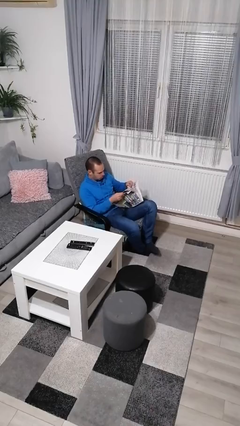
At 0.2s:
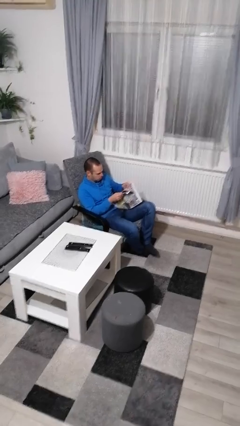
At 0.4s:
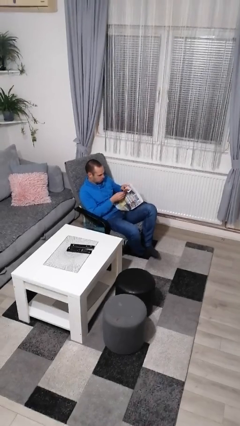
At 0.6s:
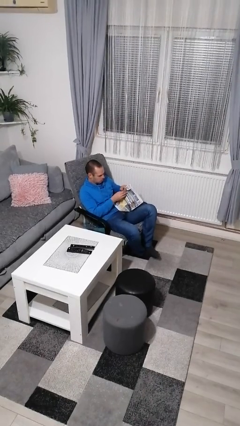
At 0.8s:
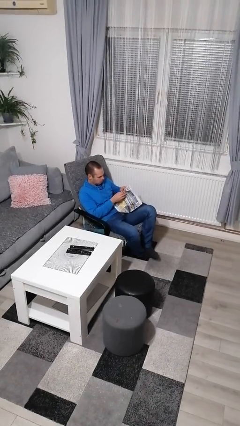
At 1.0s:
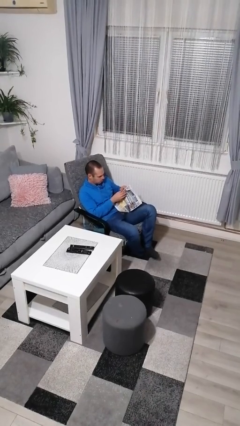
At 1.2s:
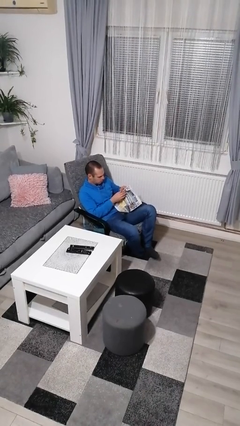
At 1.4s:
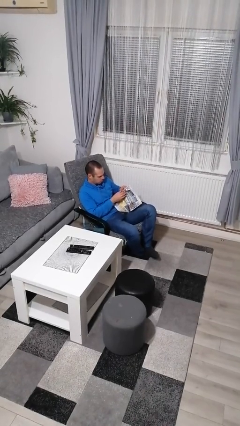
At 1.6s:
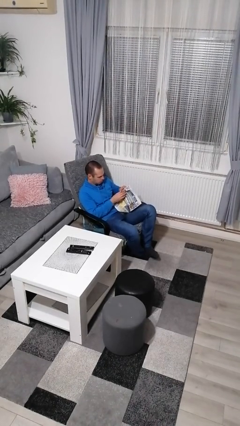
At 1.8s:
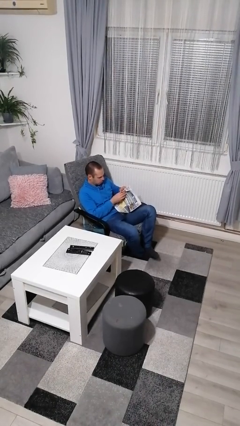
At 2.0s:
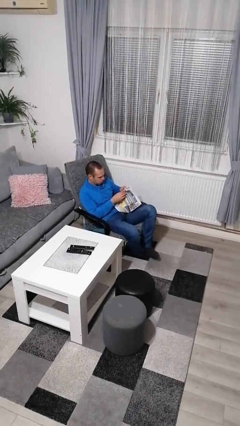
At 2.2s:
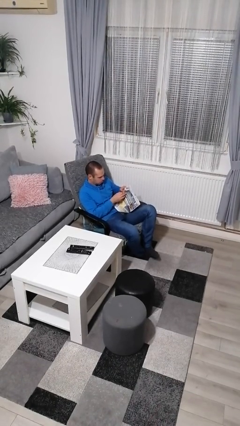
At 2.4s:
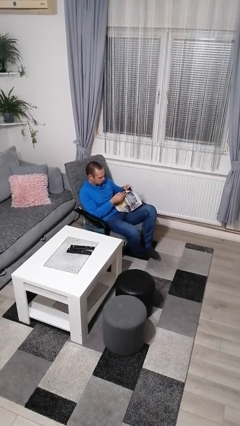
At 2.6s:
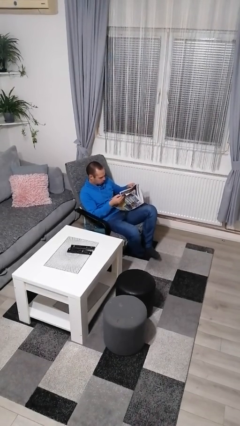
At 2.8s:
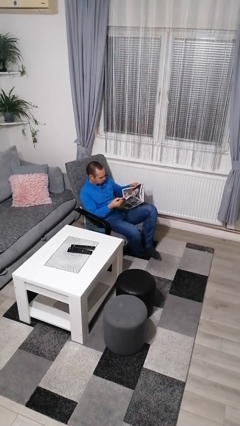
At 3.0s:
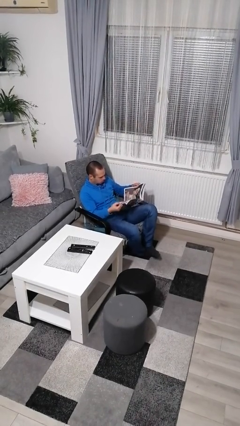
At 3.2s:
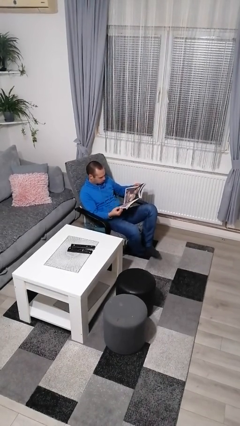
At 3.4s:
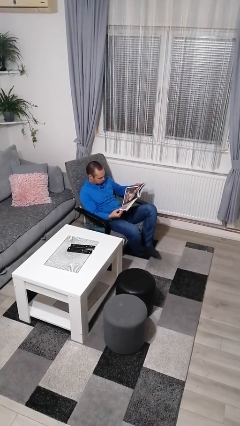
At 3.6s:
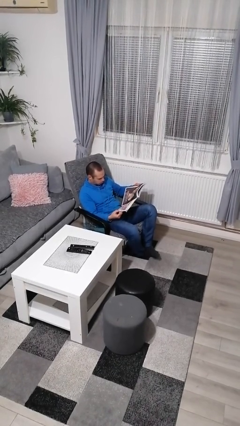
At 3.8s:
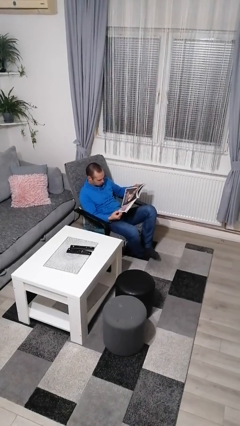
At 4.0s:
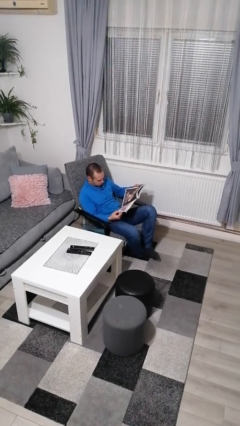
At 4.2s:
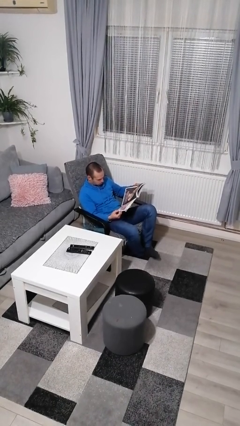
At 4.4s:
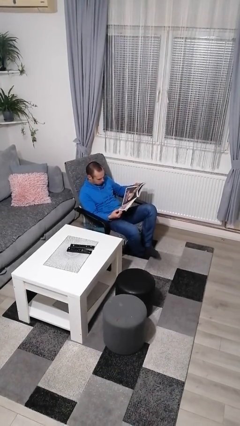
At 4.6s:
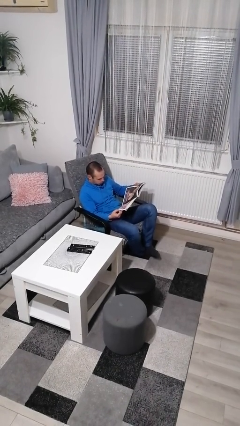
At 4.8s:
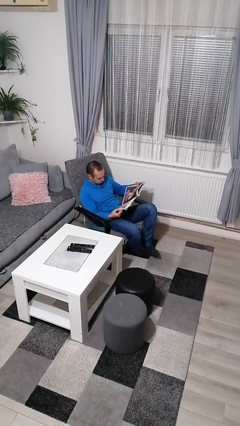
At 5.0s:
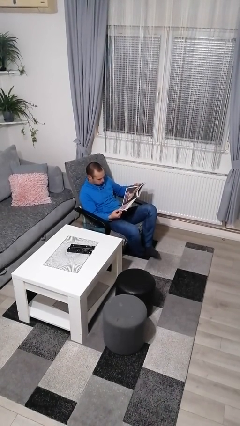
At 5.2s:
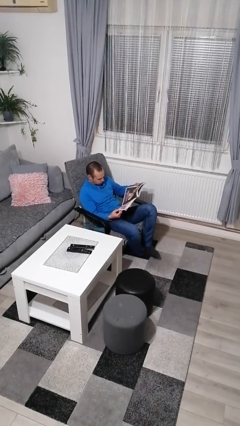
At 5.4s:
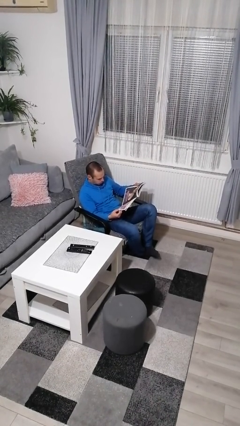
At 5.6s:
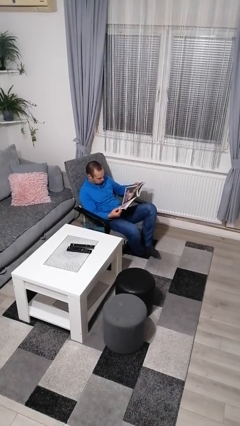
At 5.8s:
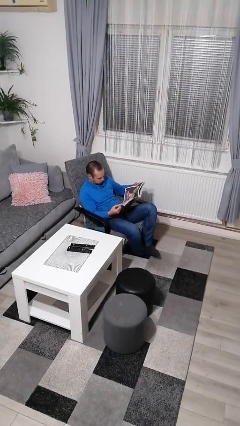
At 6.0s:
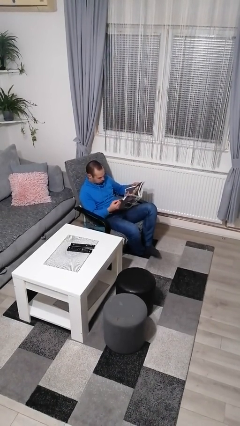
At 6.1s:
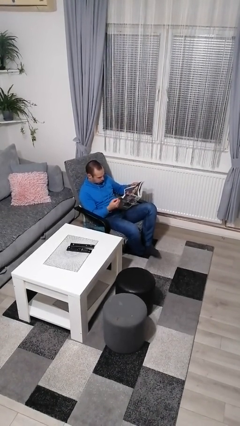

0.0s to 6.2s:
person reads newspaper

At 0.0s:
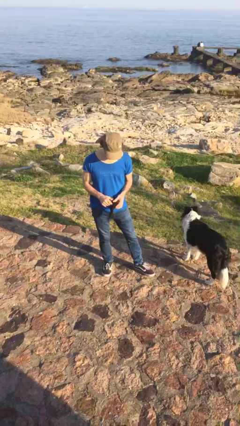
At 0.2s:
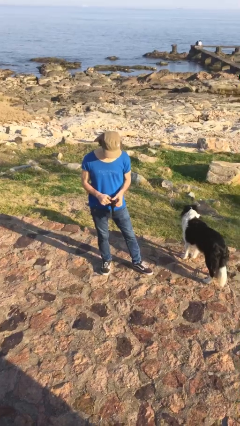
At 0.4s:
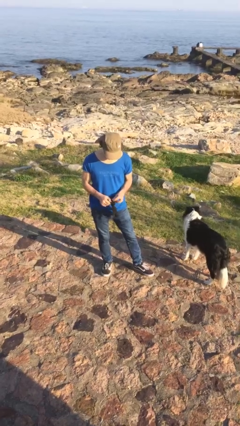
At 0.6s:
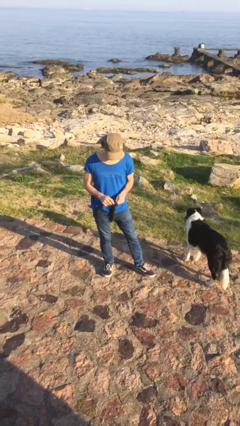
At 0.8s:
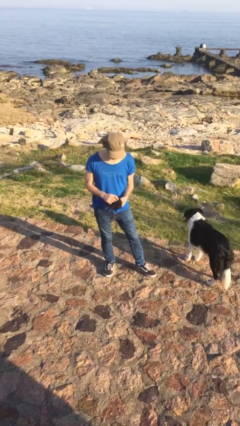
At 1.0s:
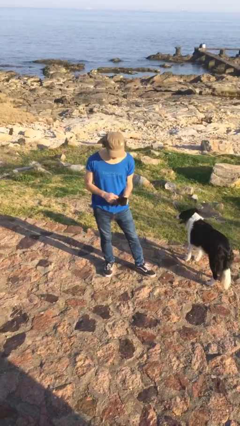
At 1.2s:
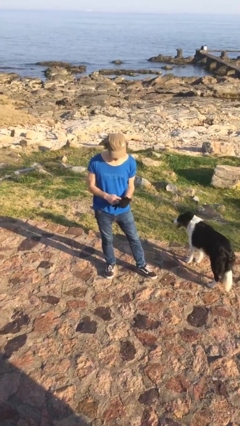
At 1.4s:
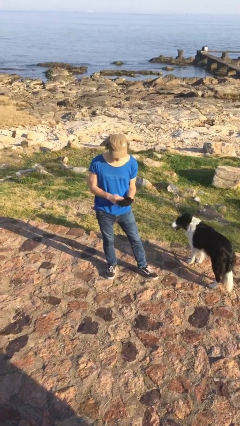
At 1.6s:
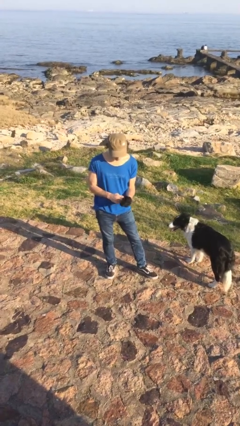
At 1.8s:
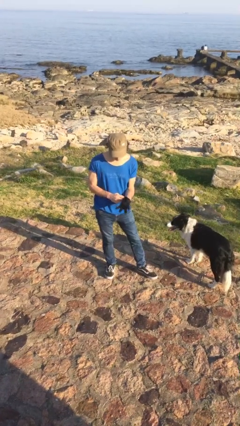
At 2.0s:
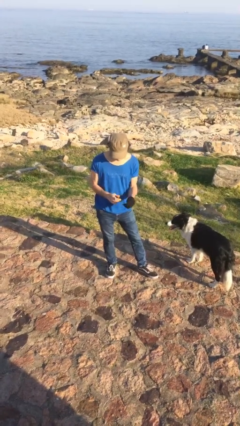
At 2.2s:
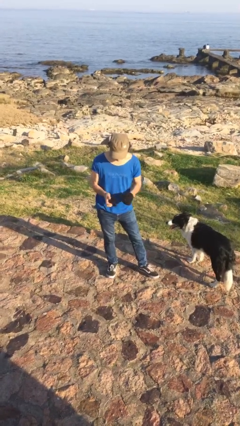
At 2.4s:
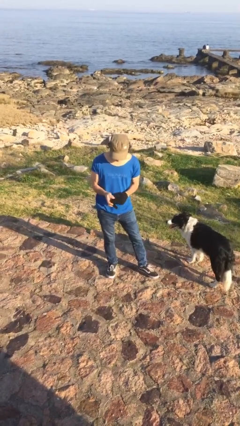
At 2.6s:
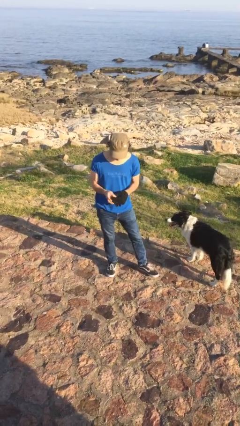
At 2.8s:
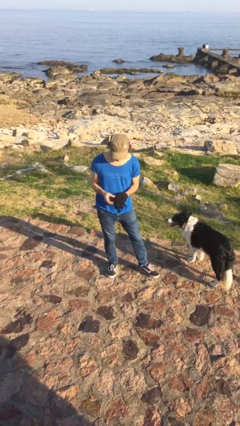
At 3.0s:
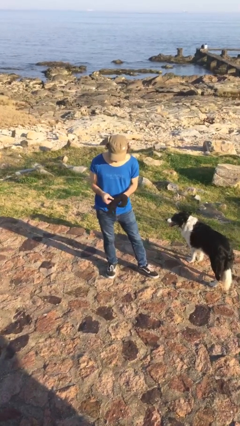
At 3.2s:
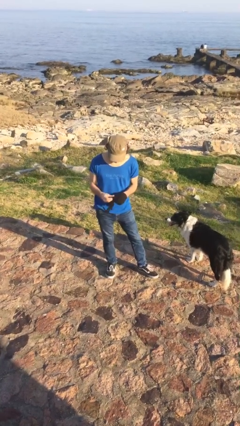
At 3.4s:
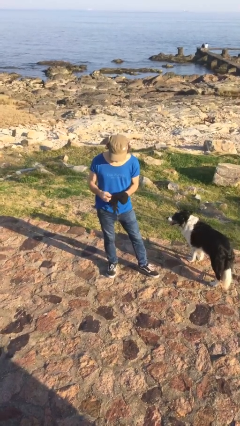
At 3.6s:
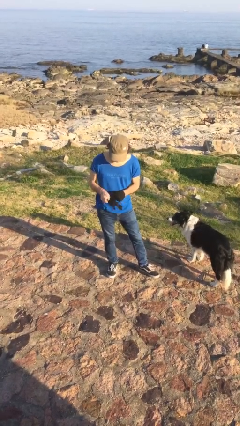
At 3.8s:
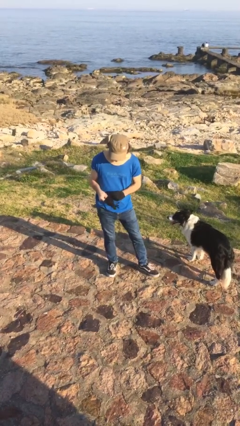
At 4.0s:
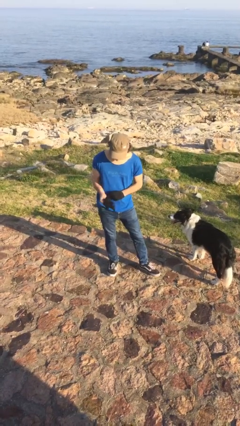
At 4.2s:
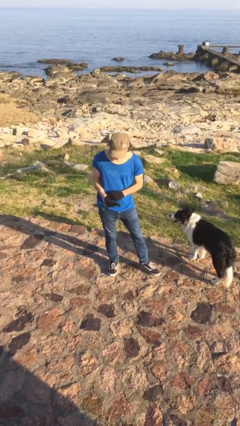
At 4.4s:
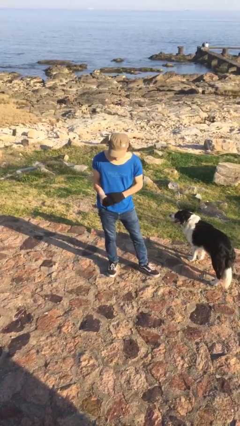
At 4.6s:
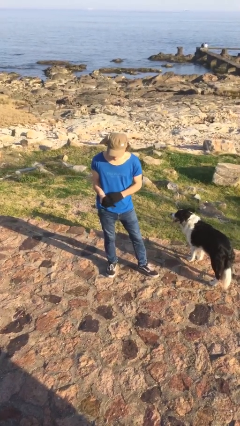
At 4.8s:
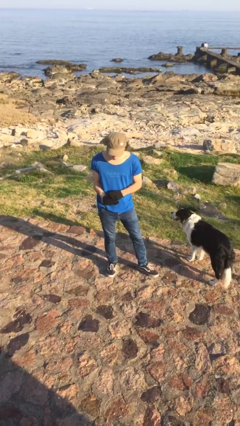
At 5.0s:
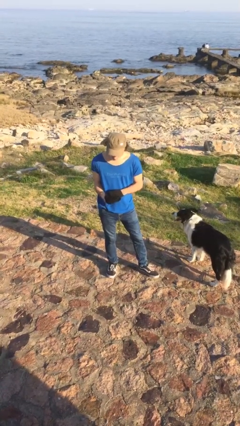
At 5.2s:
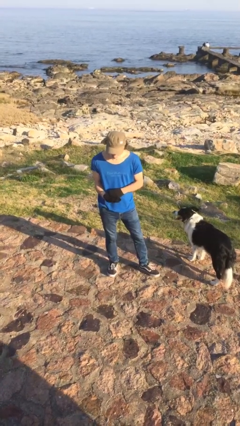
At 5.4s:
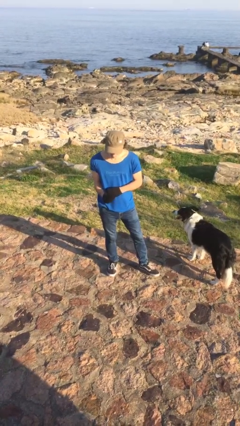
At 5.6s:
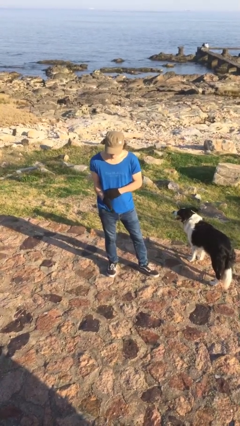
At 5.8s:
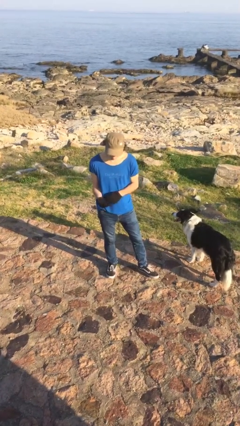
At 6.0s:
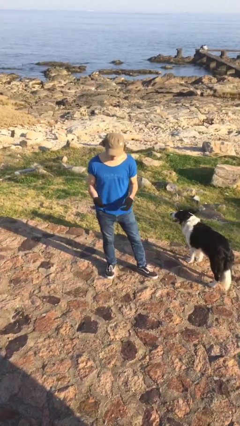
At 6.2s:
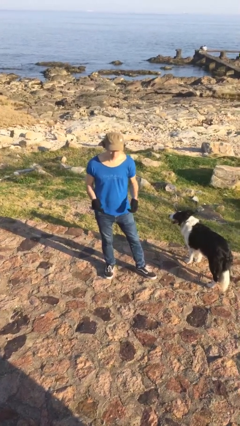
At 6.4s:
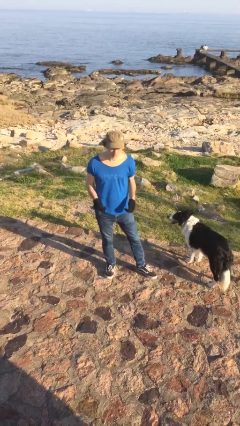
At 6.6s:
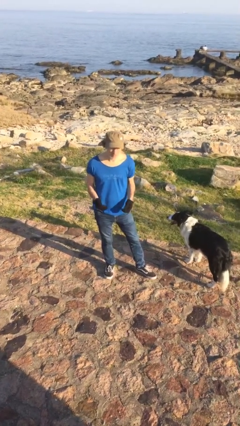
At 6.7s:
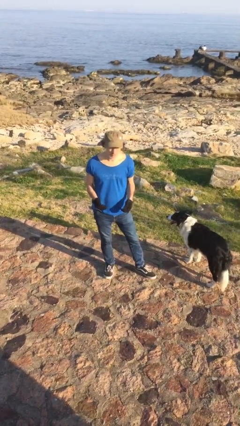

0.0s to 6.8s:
person puts on gloves

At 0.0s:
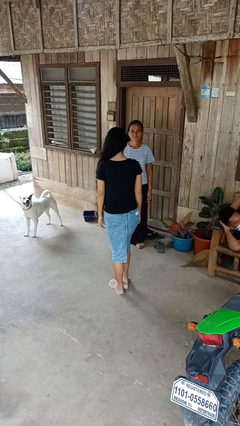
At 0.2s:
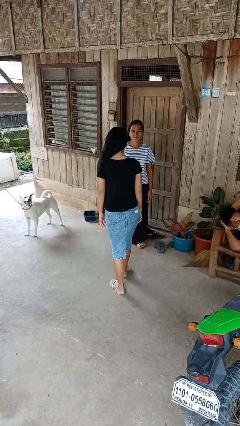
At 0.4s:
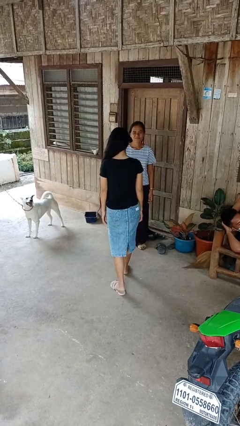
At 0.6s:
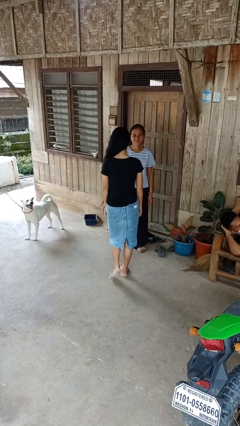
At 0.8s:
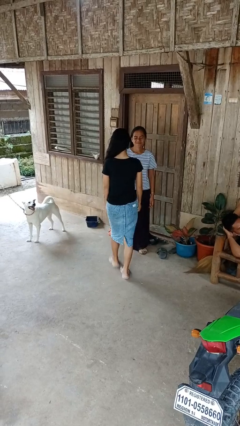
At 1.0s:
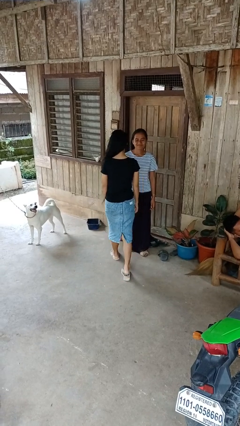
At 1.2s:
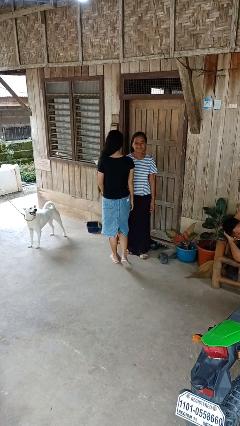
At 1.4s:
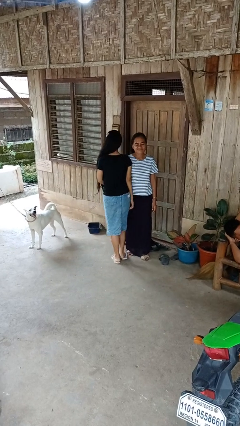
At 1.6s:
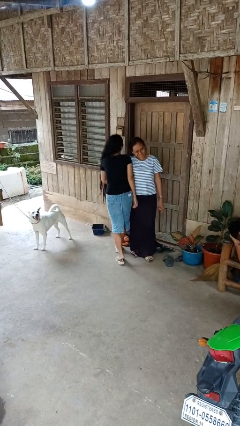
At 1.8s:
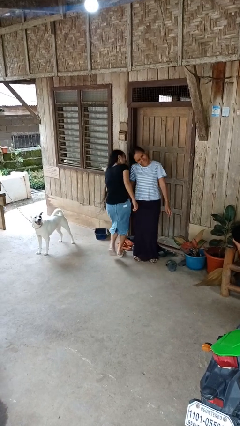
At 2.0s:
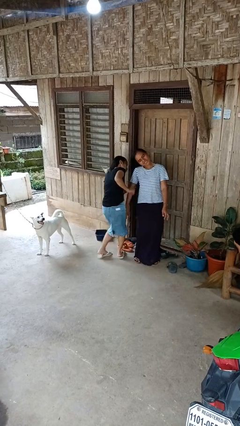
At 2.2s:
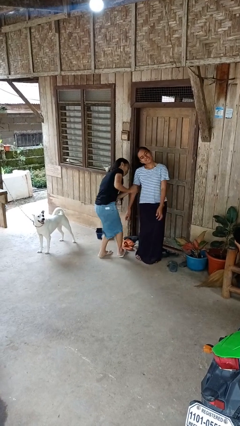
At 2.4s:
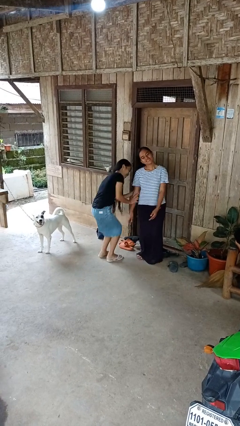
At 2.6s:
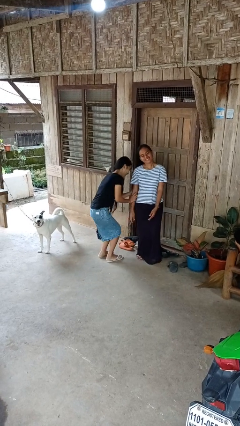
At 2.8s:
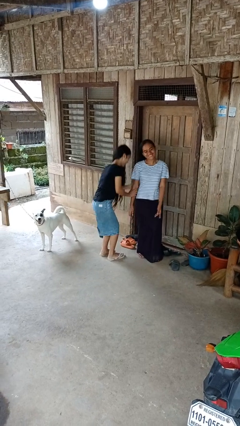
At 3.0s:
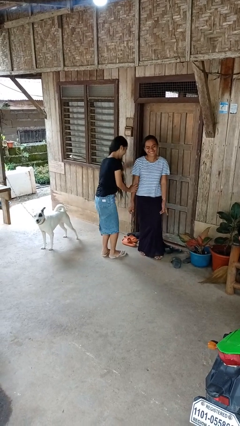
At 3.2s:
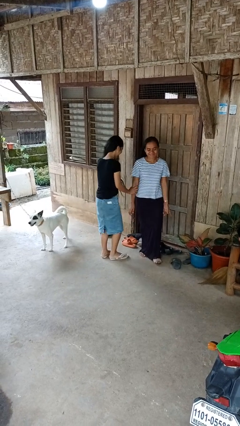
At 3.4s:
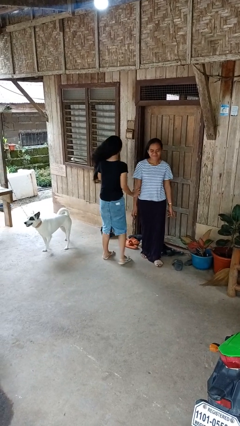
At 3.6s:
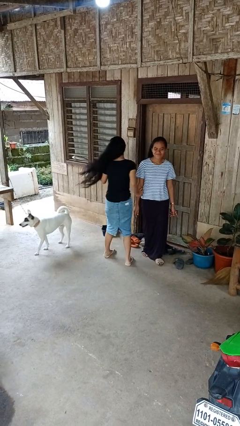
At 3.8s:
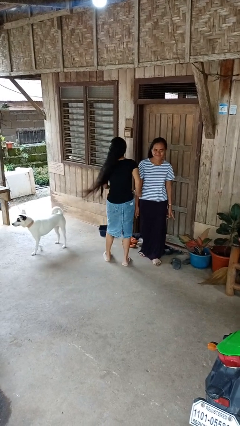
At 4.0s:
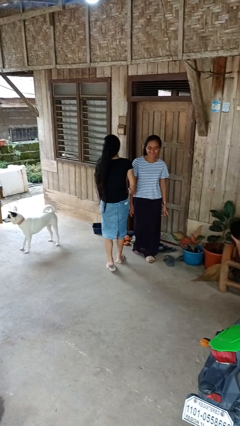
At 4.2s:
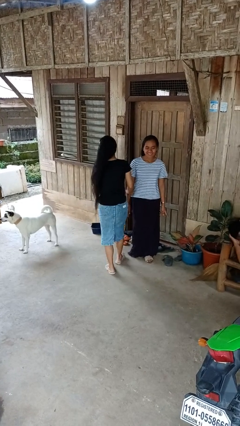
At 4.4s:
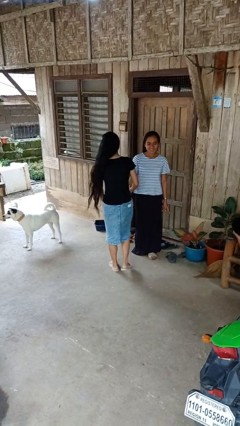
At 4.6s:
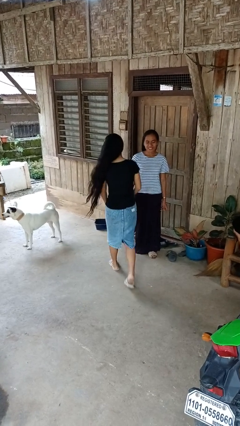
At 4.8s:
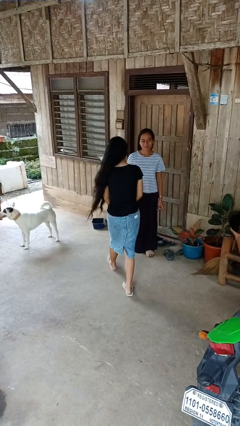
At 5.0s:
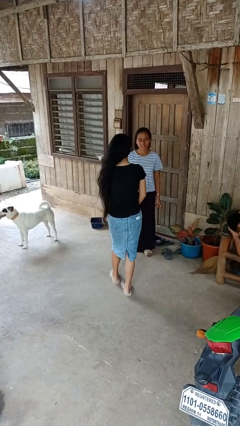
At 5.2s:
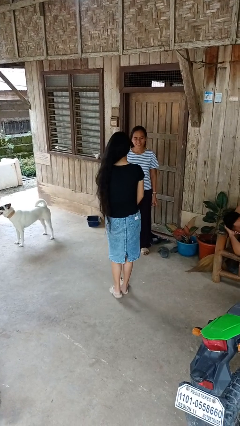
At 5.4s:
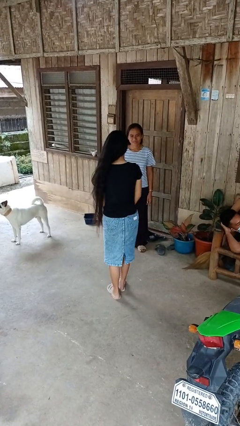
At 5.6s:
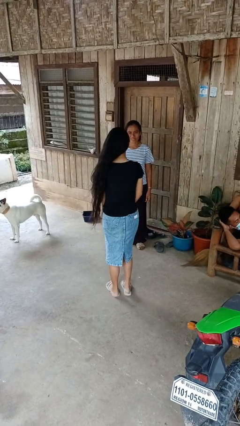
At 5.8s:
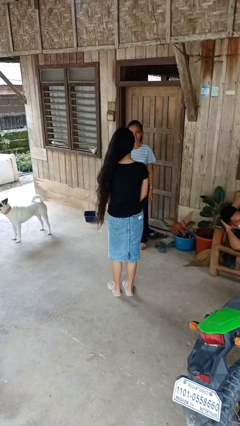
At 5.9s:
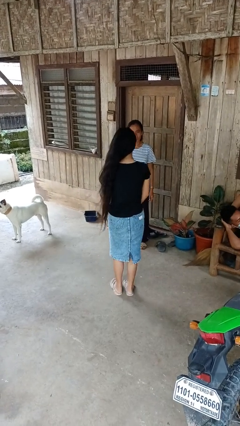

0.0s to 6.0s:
person bumps into person
